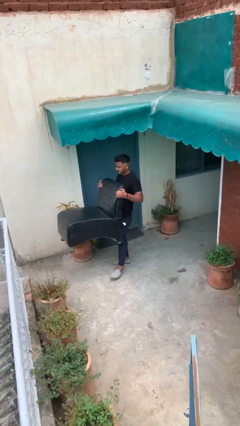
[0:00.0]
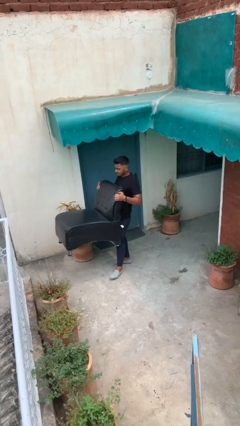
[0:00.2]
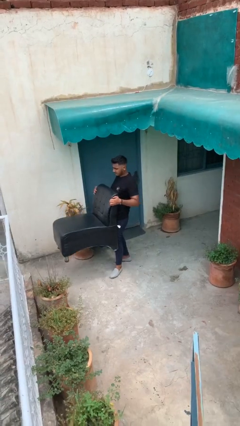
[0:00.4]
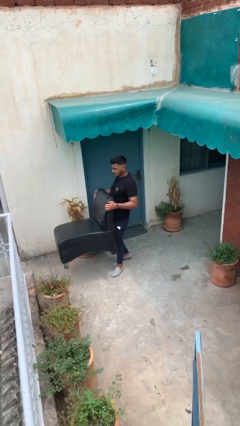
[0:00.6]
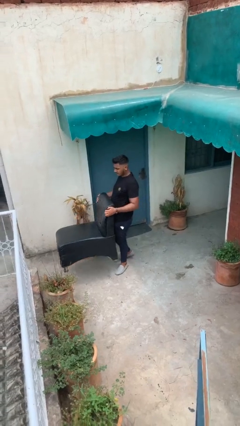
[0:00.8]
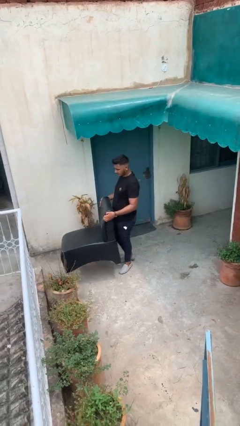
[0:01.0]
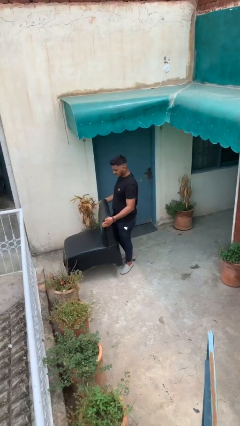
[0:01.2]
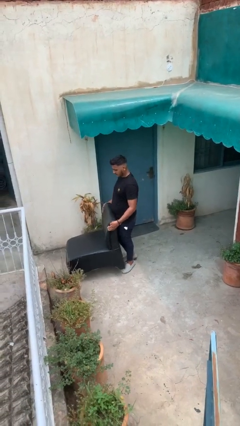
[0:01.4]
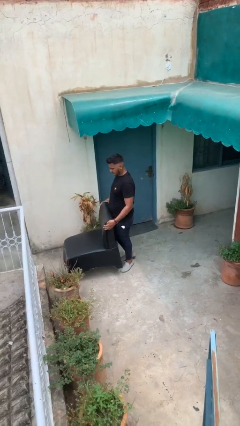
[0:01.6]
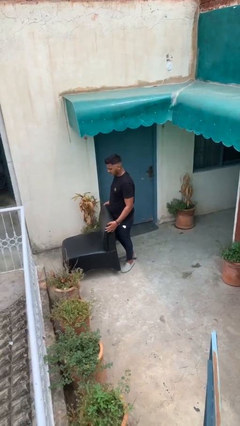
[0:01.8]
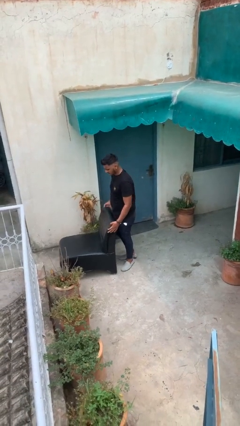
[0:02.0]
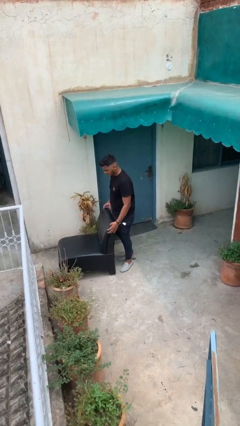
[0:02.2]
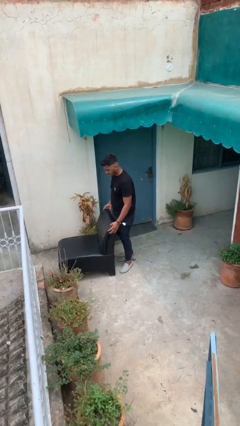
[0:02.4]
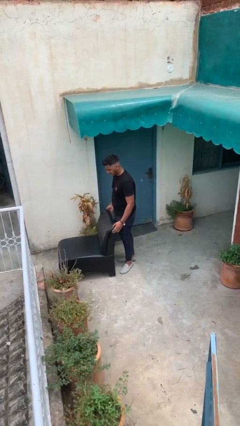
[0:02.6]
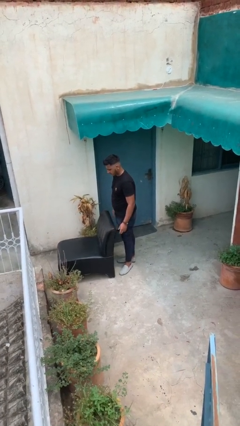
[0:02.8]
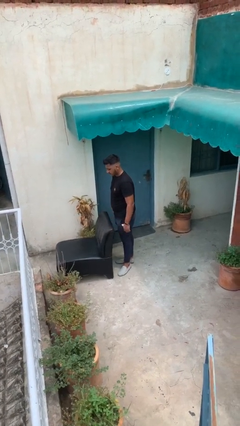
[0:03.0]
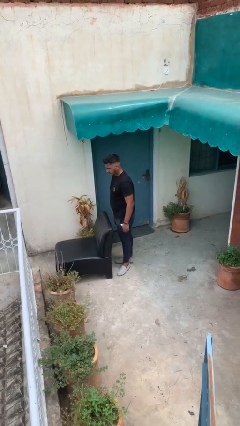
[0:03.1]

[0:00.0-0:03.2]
person puts down object on floor

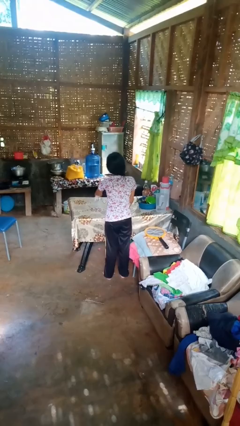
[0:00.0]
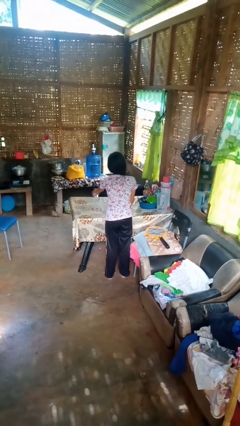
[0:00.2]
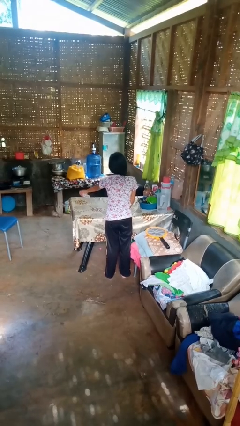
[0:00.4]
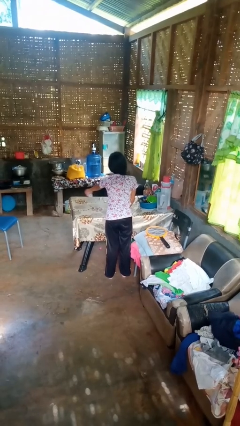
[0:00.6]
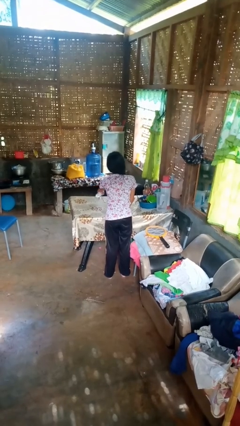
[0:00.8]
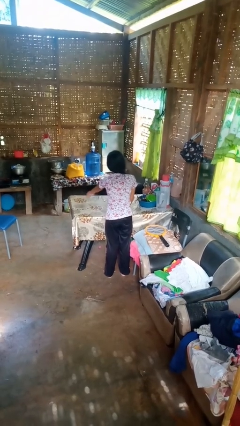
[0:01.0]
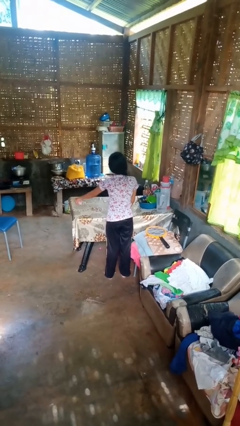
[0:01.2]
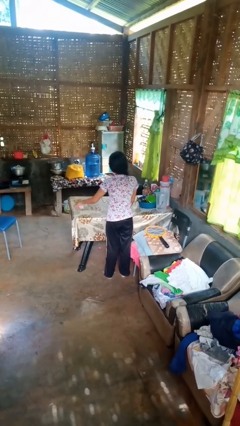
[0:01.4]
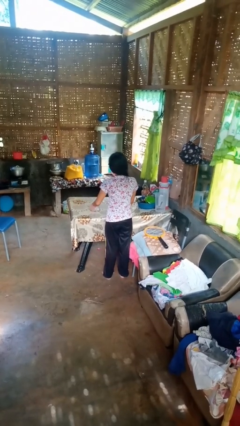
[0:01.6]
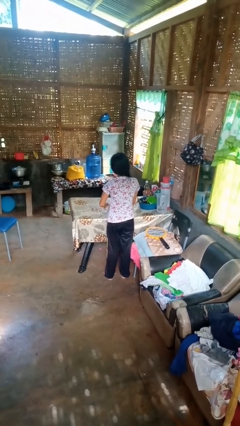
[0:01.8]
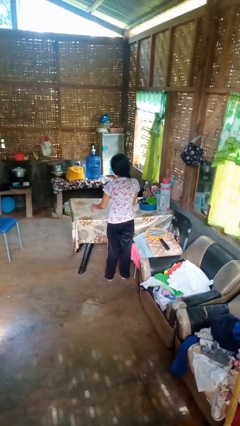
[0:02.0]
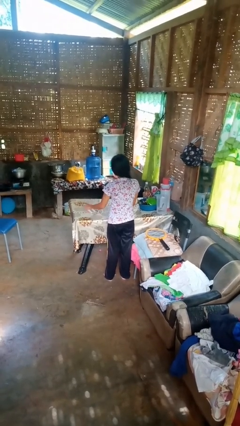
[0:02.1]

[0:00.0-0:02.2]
person sprays from bottle

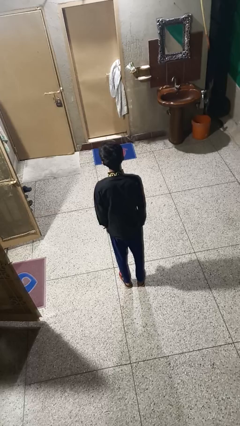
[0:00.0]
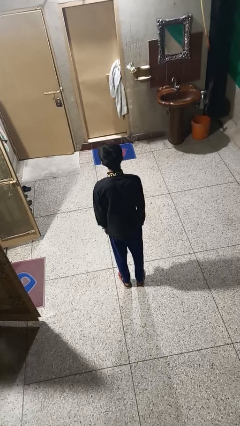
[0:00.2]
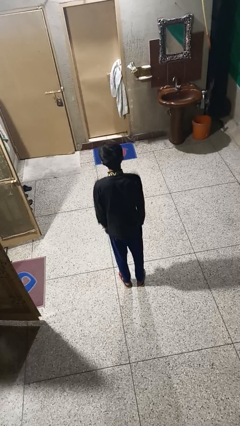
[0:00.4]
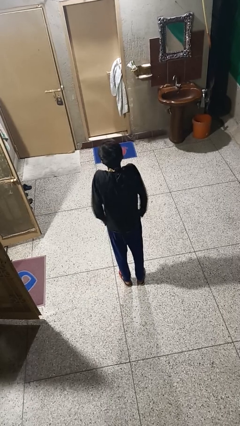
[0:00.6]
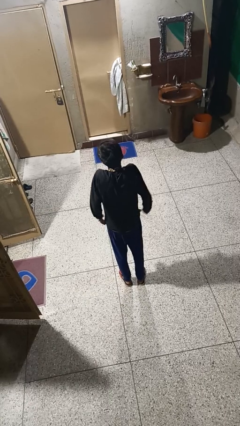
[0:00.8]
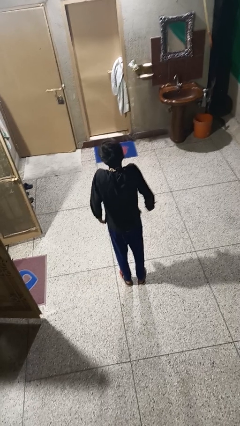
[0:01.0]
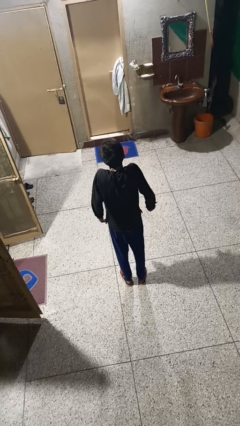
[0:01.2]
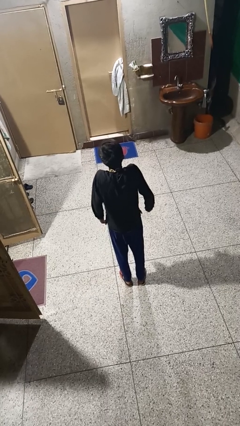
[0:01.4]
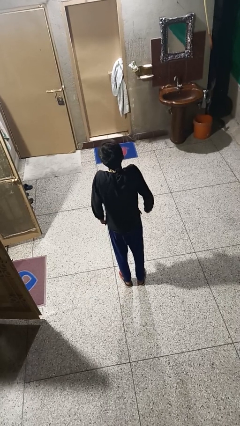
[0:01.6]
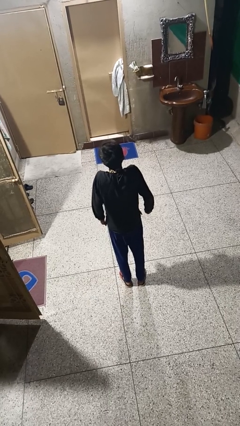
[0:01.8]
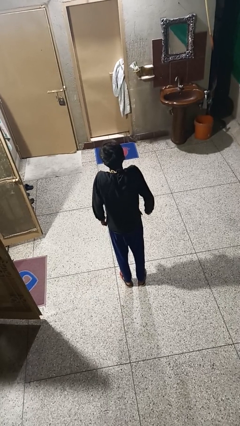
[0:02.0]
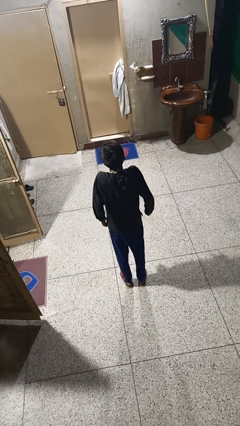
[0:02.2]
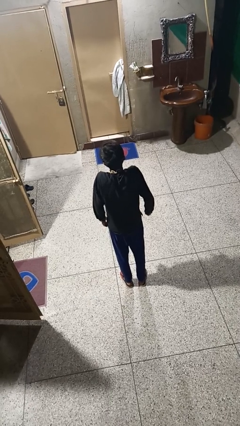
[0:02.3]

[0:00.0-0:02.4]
person shrugs

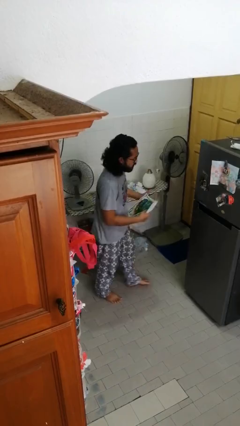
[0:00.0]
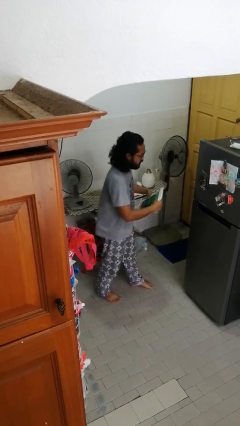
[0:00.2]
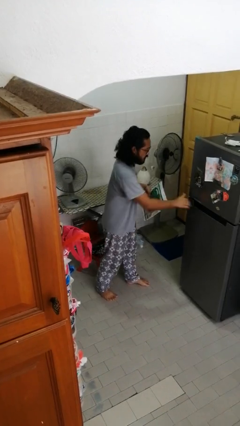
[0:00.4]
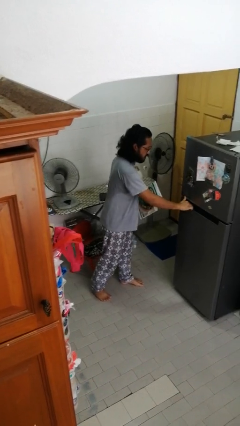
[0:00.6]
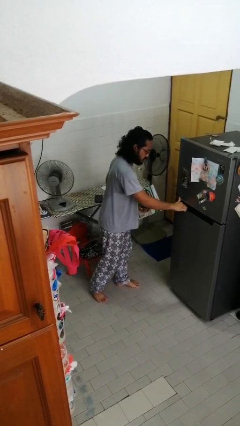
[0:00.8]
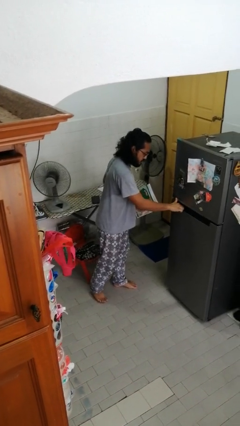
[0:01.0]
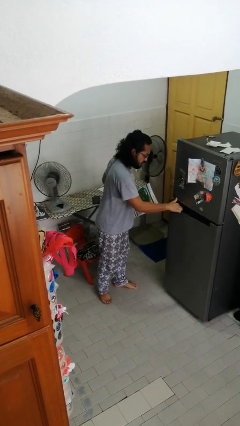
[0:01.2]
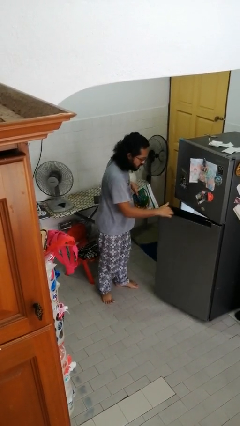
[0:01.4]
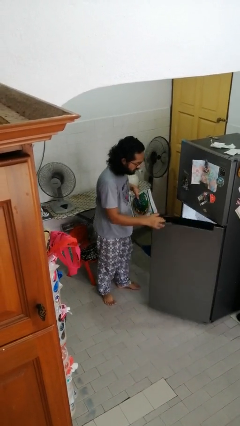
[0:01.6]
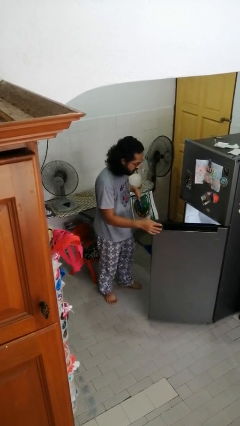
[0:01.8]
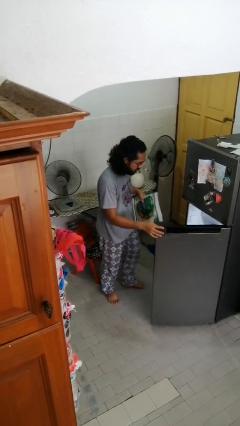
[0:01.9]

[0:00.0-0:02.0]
person opens refrigerator

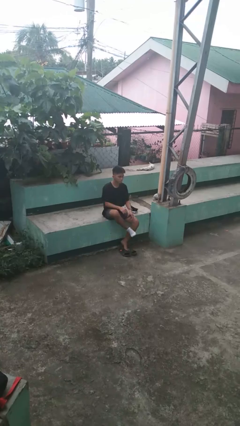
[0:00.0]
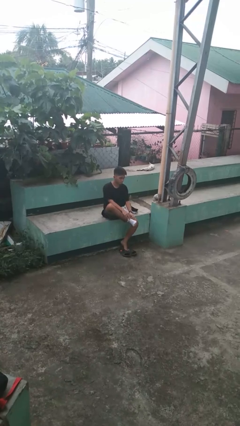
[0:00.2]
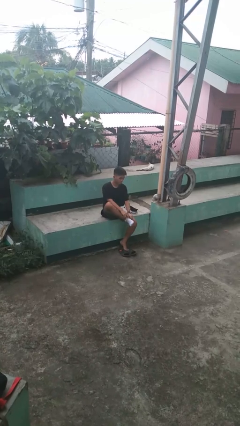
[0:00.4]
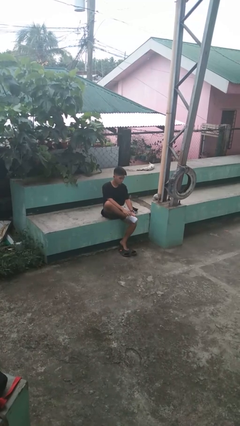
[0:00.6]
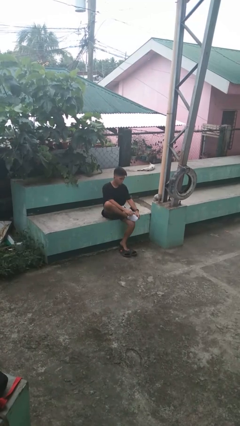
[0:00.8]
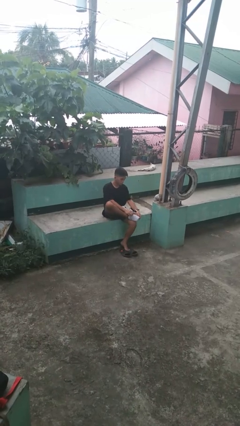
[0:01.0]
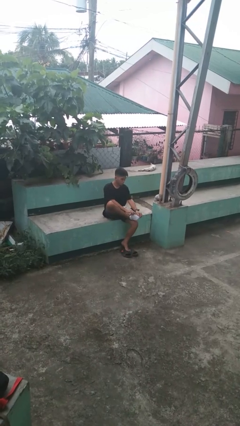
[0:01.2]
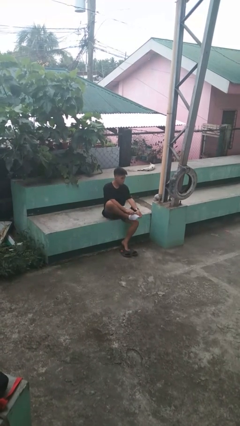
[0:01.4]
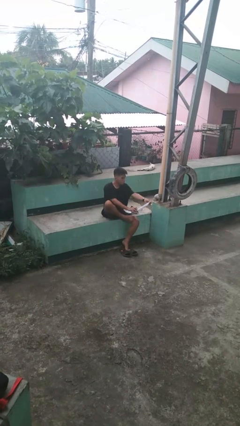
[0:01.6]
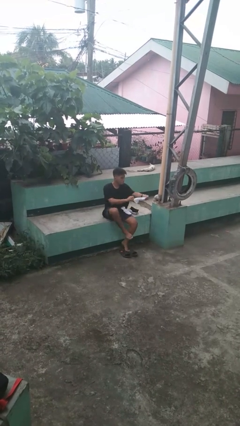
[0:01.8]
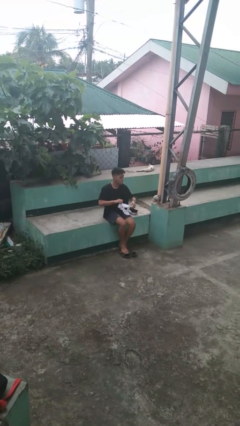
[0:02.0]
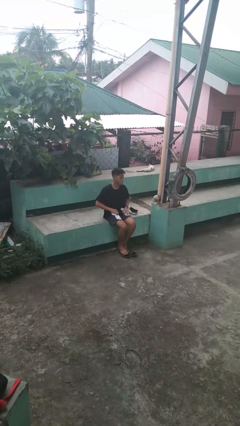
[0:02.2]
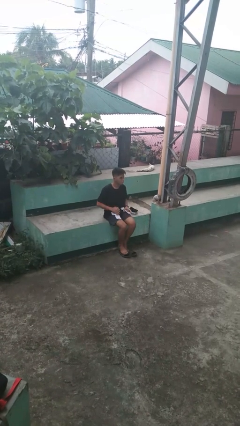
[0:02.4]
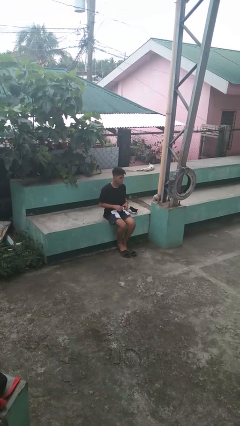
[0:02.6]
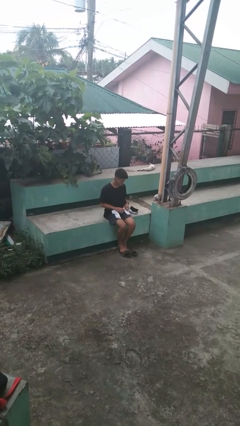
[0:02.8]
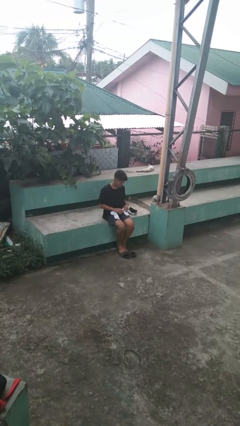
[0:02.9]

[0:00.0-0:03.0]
person takes off socks

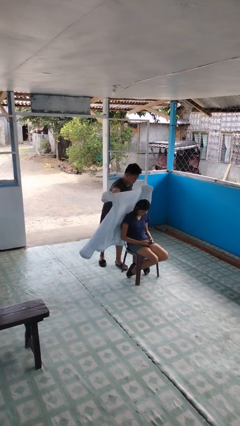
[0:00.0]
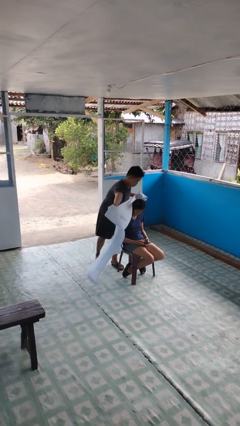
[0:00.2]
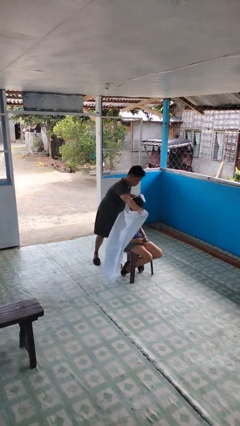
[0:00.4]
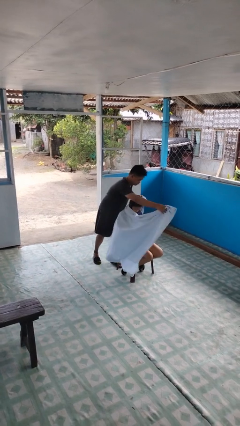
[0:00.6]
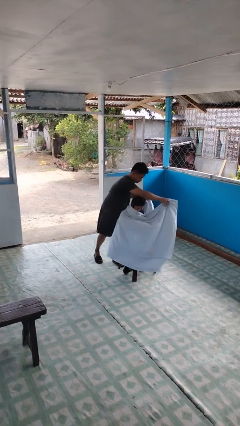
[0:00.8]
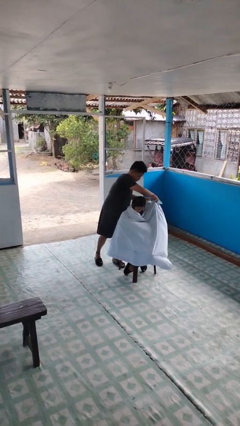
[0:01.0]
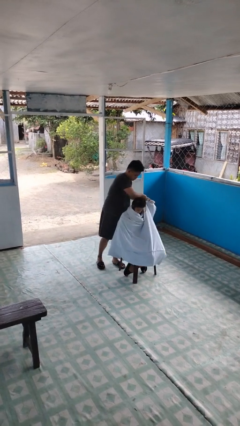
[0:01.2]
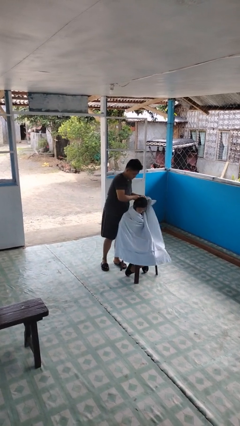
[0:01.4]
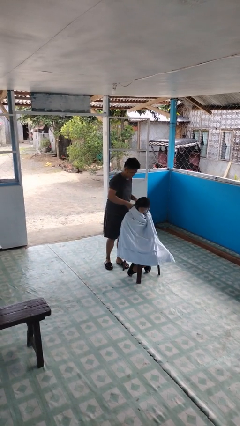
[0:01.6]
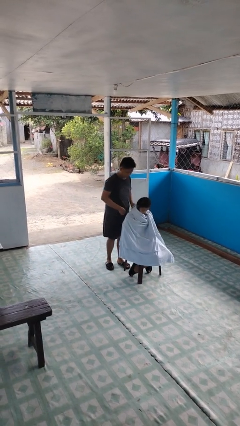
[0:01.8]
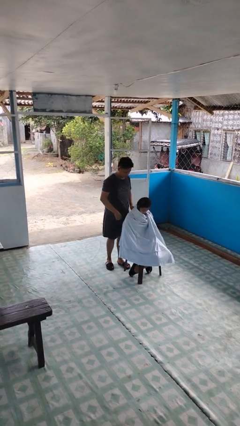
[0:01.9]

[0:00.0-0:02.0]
person covers friend with blanket

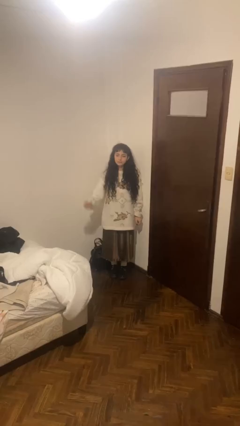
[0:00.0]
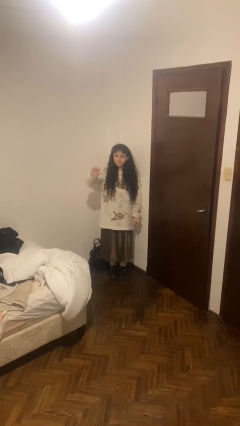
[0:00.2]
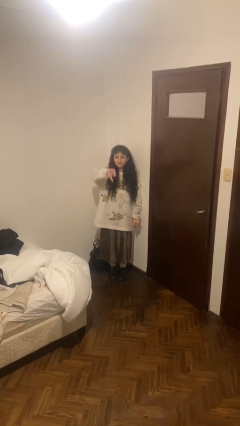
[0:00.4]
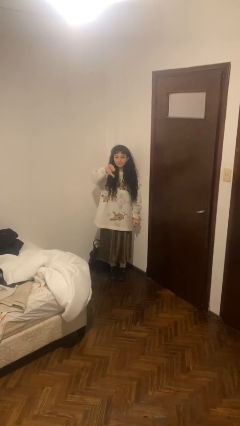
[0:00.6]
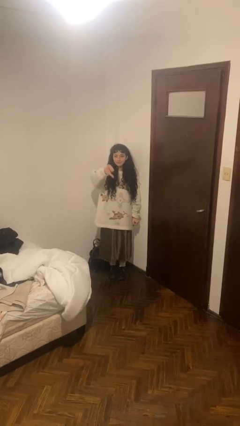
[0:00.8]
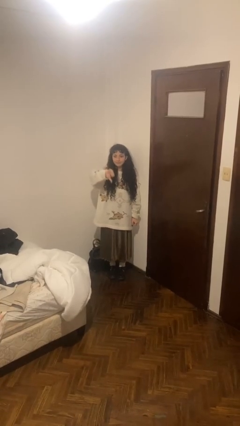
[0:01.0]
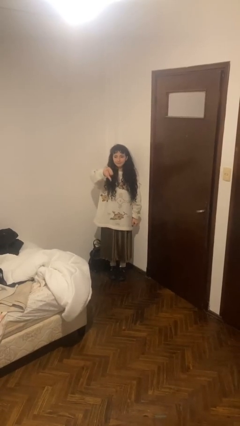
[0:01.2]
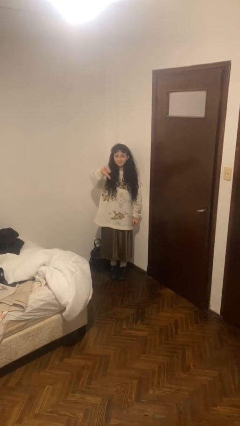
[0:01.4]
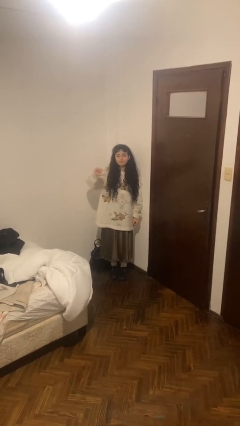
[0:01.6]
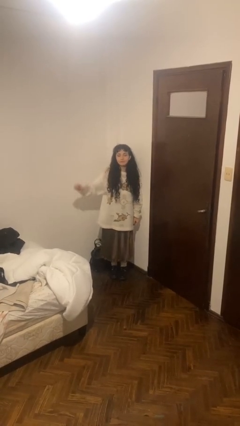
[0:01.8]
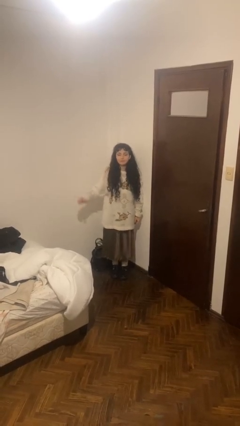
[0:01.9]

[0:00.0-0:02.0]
person gestures thumbs down
